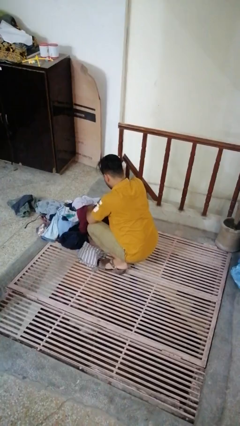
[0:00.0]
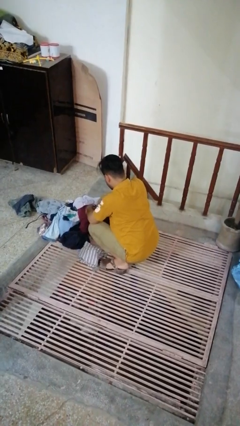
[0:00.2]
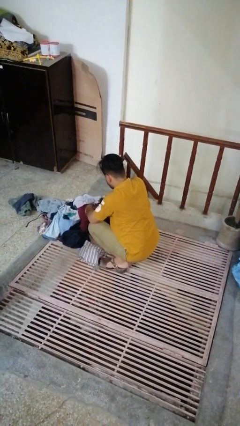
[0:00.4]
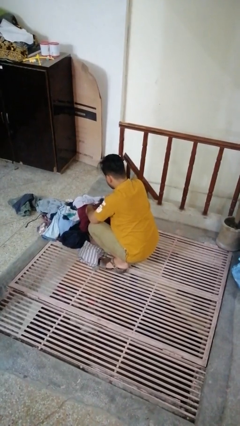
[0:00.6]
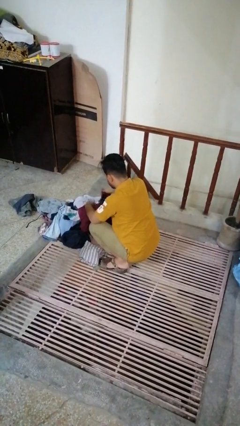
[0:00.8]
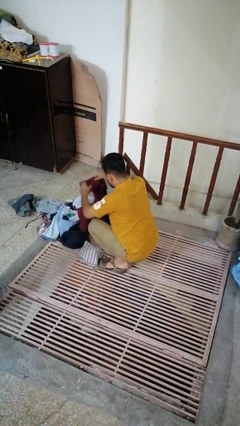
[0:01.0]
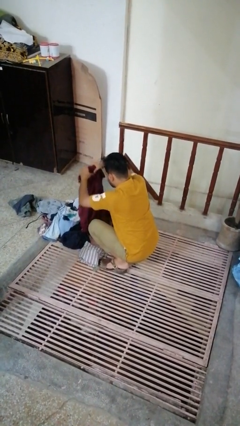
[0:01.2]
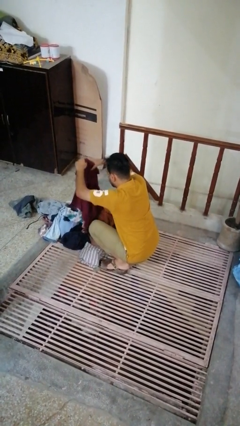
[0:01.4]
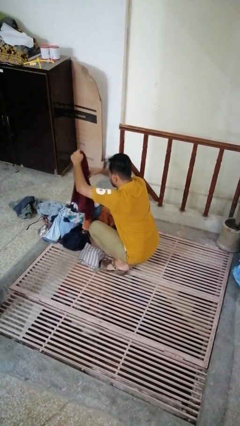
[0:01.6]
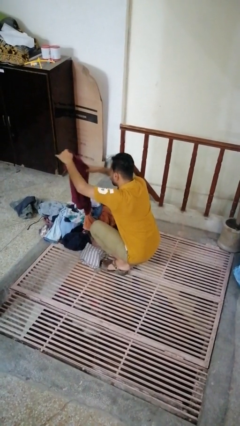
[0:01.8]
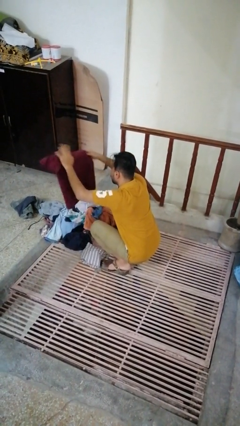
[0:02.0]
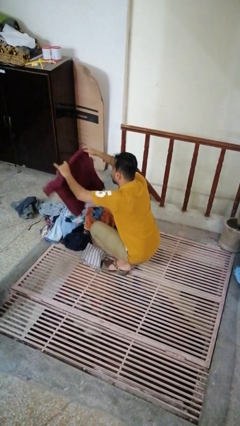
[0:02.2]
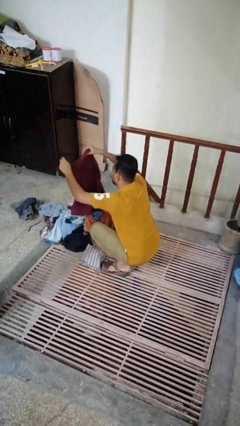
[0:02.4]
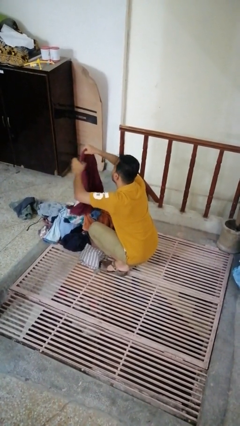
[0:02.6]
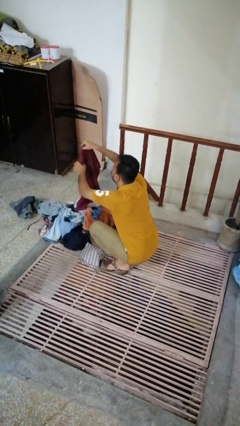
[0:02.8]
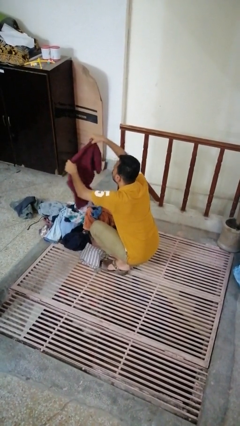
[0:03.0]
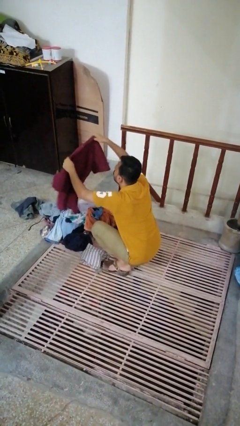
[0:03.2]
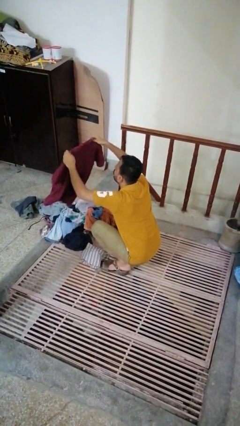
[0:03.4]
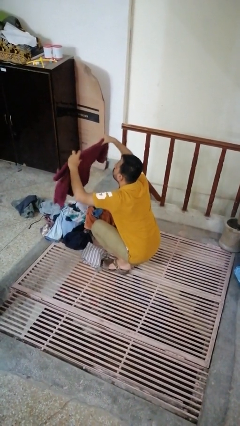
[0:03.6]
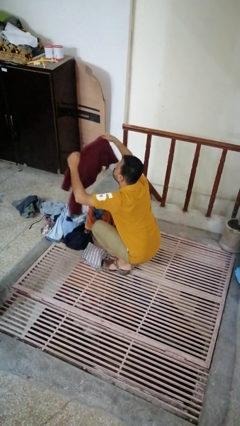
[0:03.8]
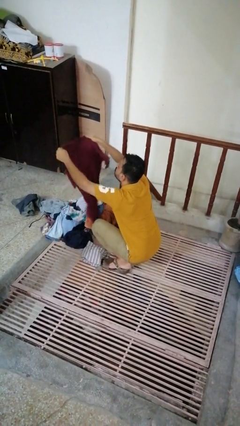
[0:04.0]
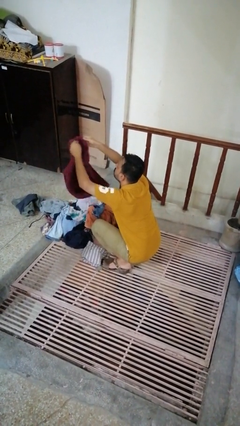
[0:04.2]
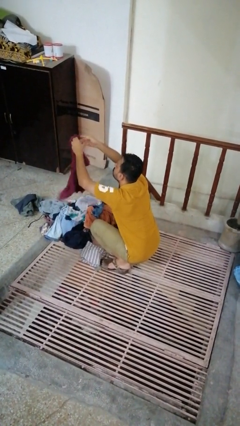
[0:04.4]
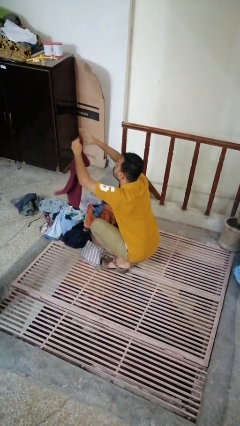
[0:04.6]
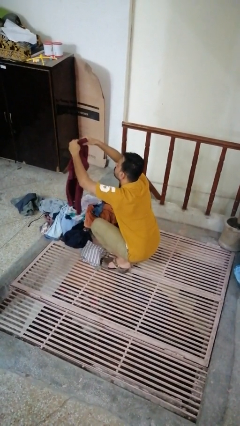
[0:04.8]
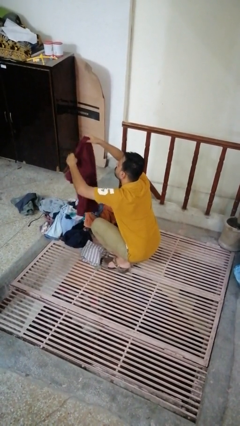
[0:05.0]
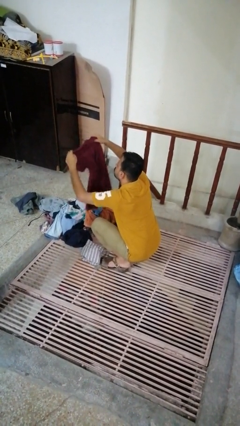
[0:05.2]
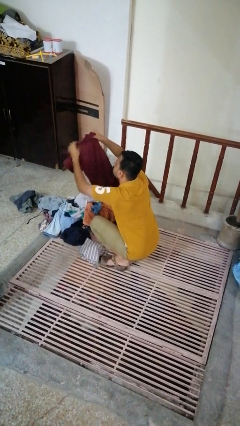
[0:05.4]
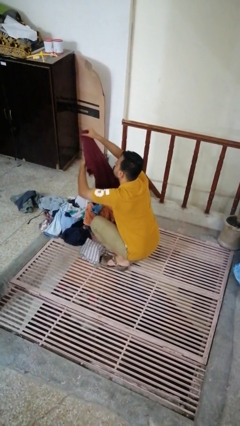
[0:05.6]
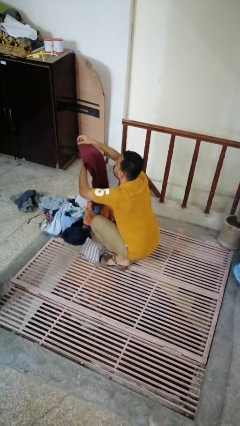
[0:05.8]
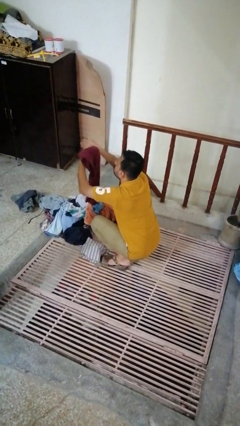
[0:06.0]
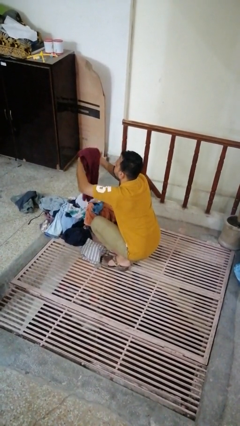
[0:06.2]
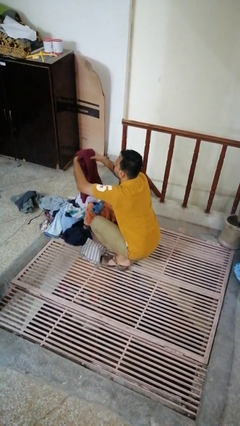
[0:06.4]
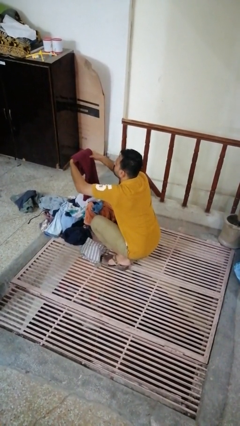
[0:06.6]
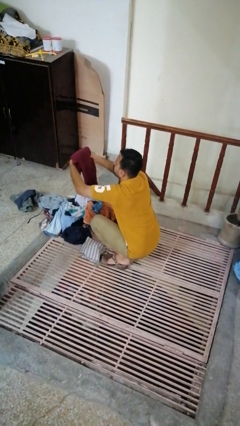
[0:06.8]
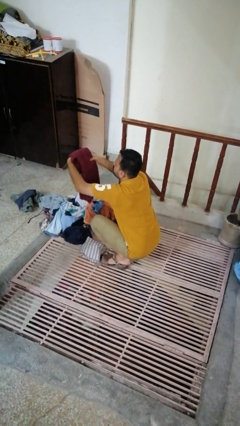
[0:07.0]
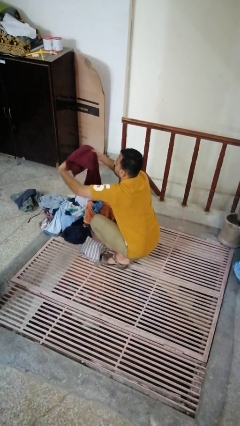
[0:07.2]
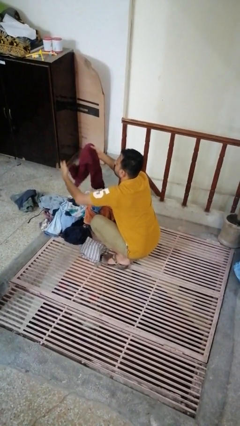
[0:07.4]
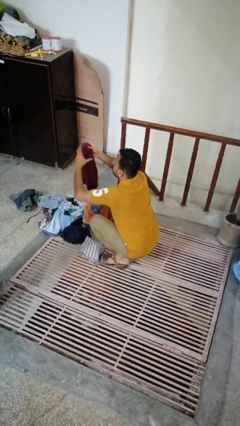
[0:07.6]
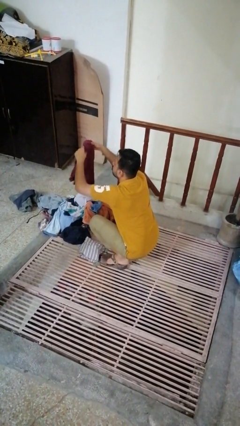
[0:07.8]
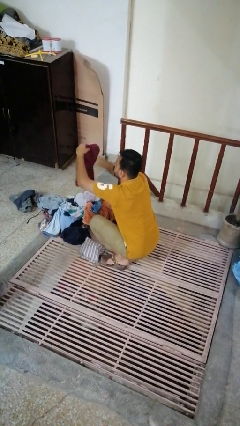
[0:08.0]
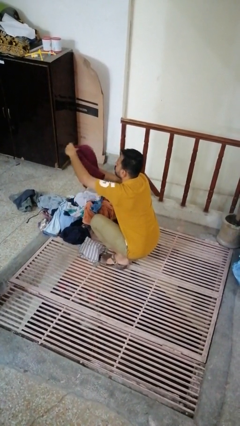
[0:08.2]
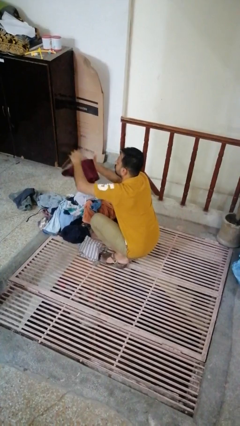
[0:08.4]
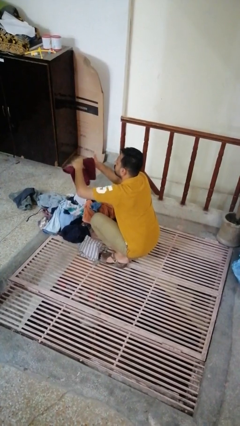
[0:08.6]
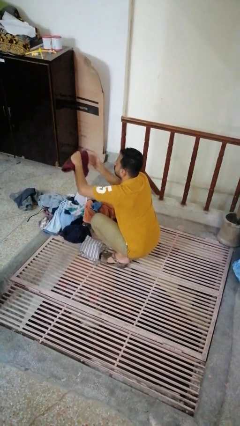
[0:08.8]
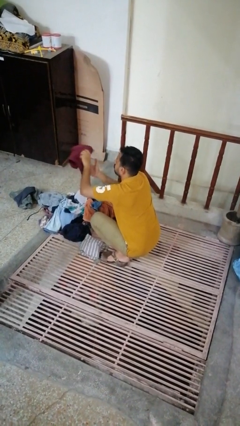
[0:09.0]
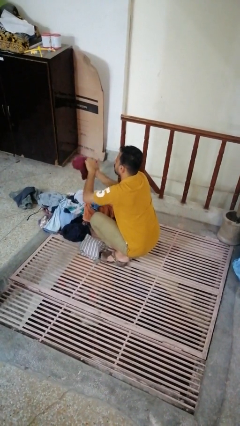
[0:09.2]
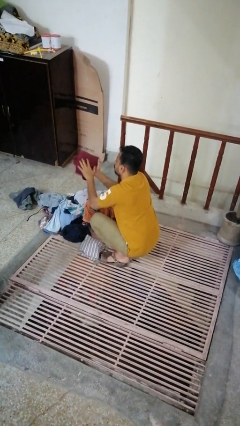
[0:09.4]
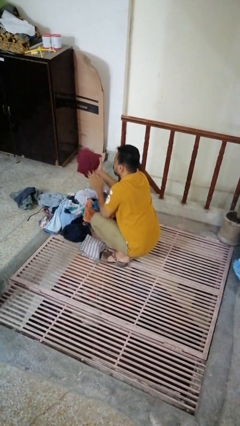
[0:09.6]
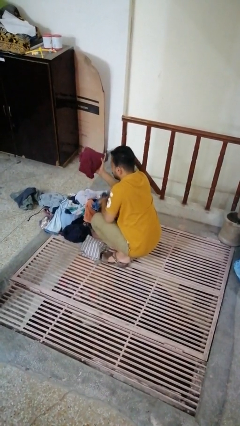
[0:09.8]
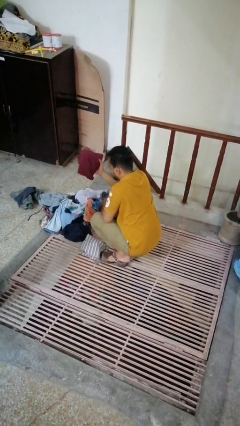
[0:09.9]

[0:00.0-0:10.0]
person folds shirt

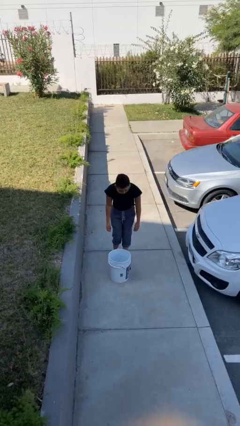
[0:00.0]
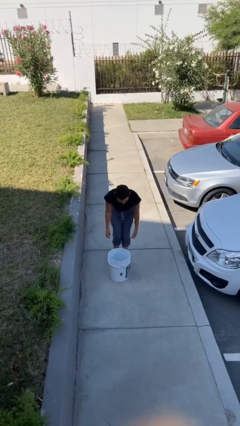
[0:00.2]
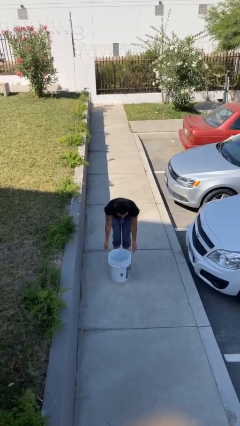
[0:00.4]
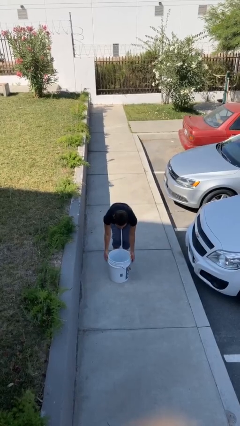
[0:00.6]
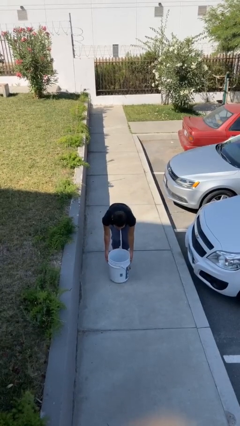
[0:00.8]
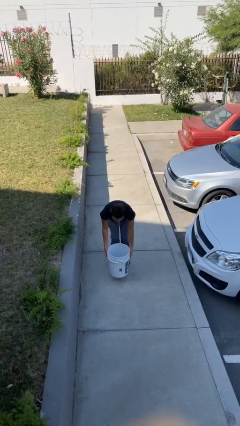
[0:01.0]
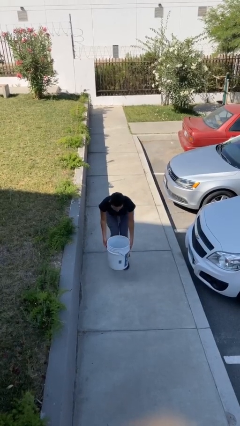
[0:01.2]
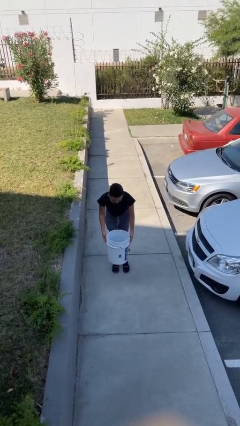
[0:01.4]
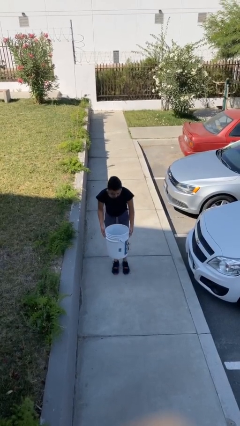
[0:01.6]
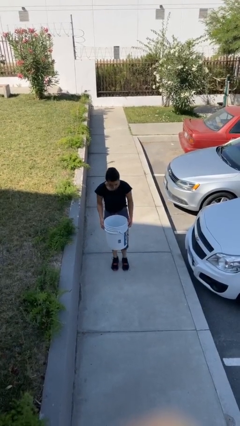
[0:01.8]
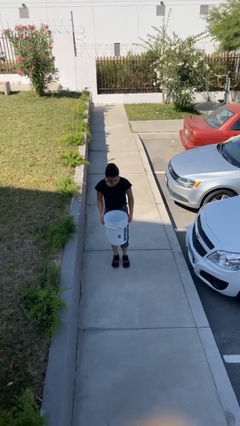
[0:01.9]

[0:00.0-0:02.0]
person picks up object from floor

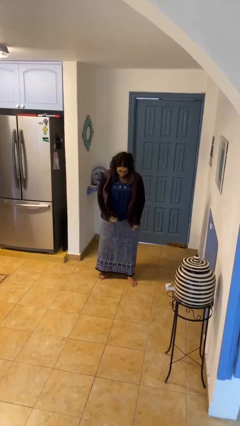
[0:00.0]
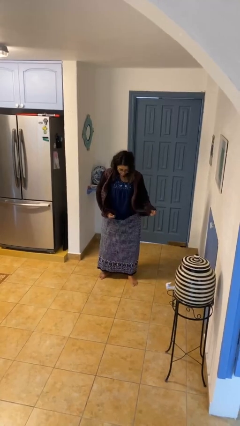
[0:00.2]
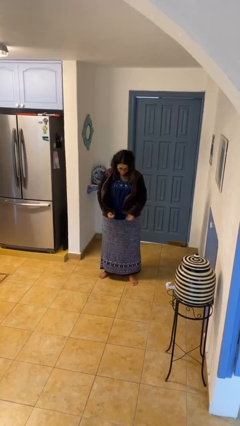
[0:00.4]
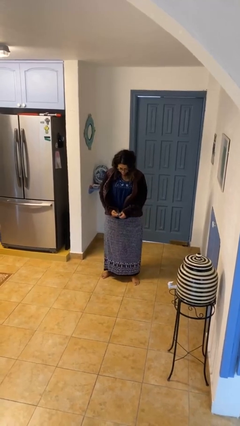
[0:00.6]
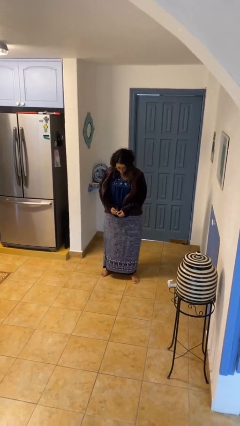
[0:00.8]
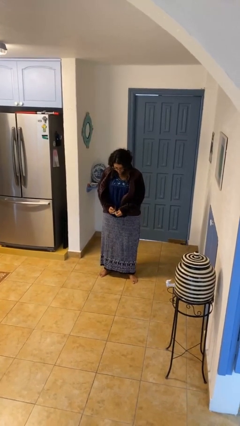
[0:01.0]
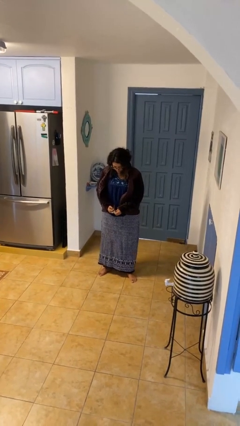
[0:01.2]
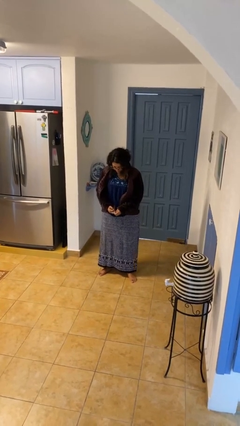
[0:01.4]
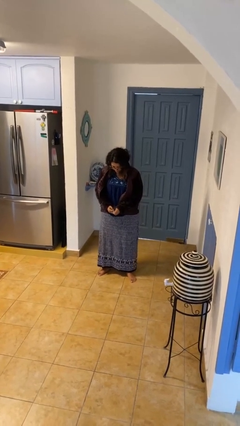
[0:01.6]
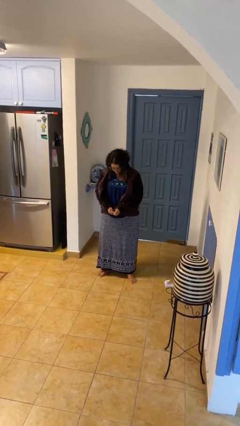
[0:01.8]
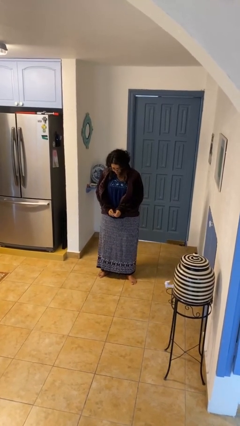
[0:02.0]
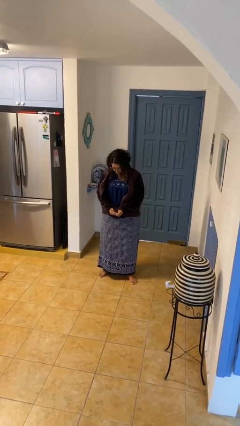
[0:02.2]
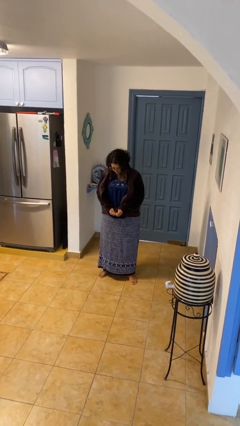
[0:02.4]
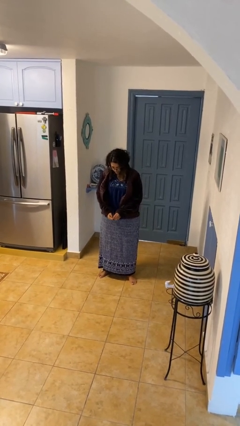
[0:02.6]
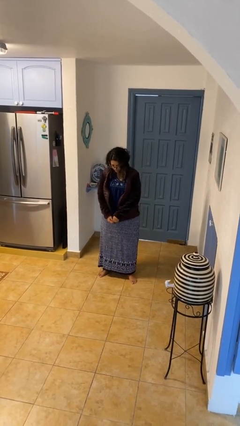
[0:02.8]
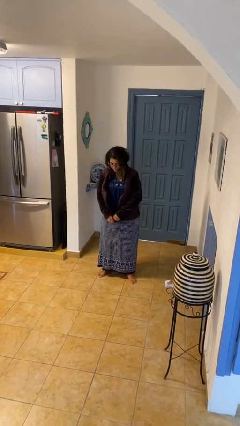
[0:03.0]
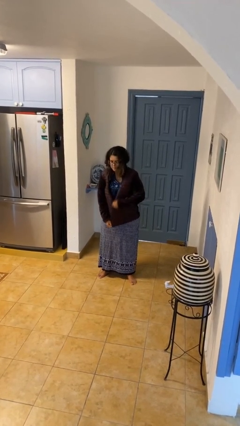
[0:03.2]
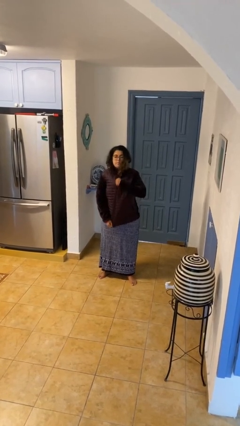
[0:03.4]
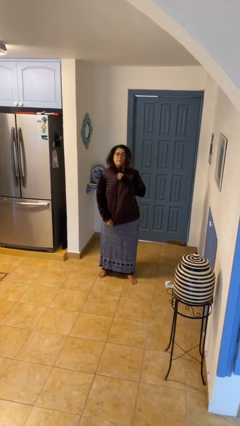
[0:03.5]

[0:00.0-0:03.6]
person zips up jacket

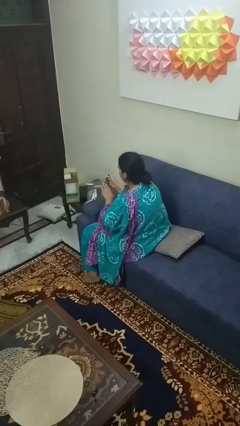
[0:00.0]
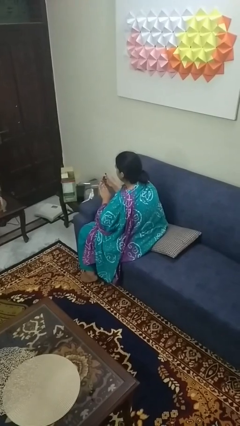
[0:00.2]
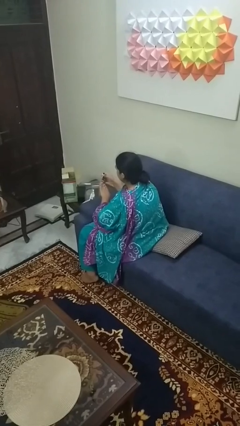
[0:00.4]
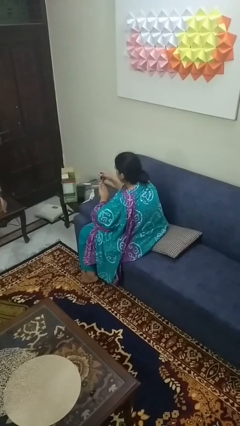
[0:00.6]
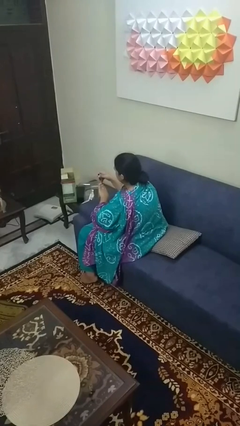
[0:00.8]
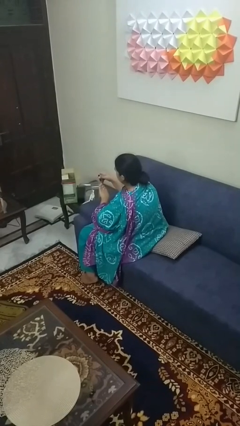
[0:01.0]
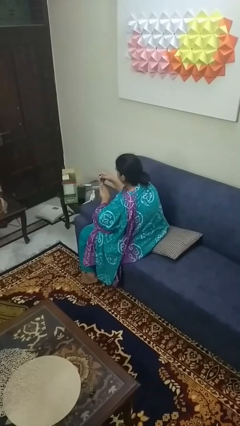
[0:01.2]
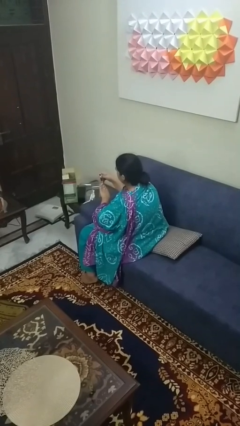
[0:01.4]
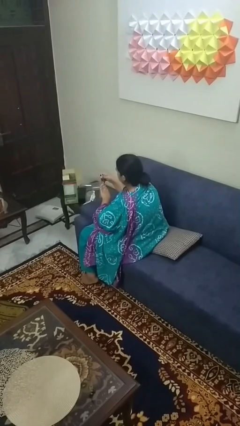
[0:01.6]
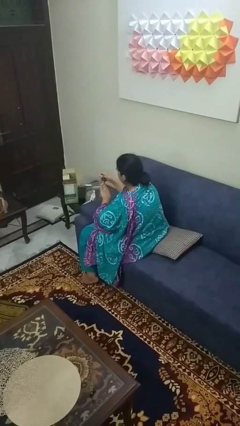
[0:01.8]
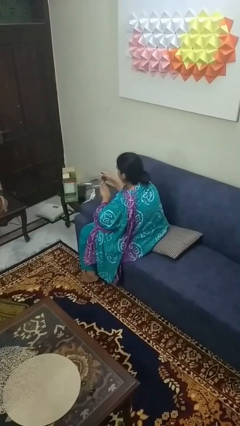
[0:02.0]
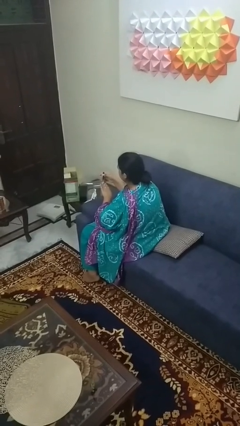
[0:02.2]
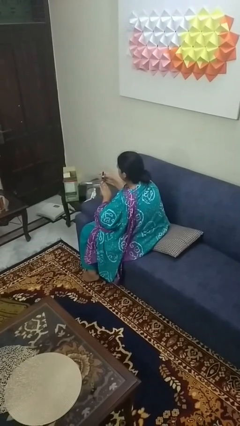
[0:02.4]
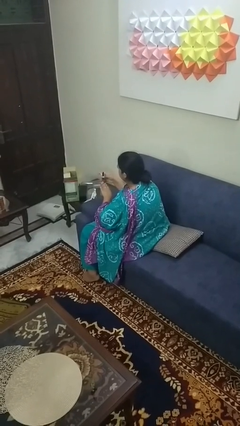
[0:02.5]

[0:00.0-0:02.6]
person clips fingernails
